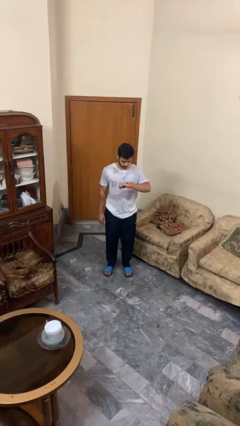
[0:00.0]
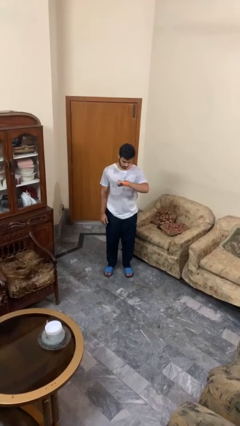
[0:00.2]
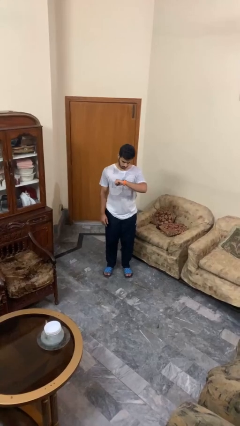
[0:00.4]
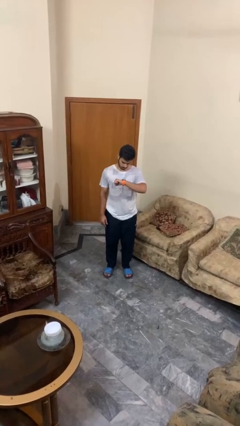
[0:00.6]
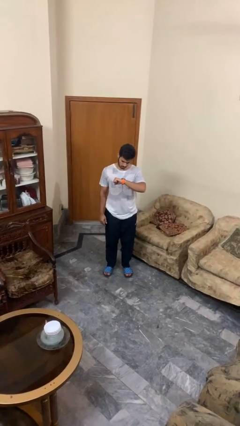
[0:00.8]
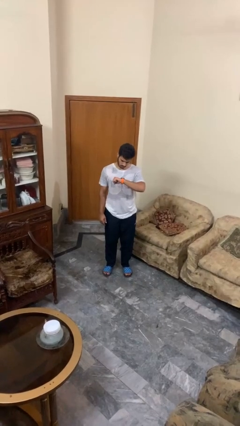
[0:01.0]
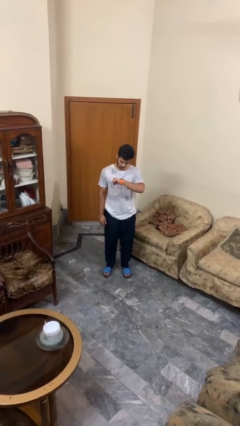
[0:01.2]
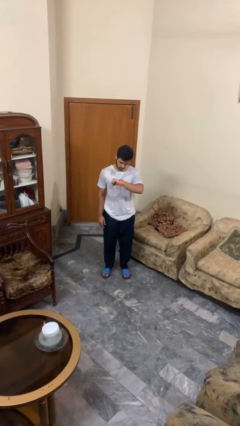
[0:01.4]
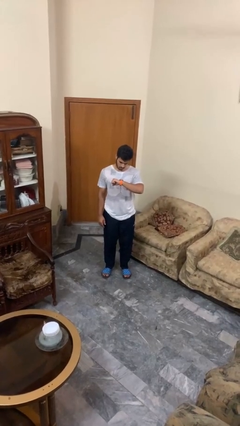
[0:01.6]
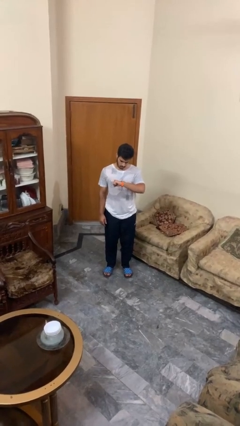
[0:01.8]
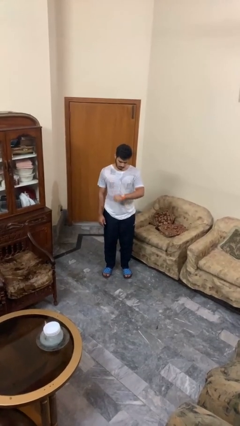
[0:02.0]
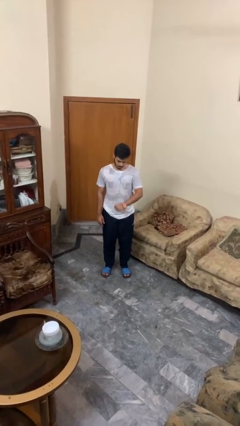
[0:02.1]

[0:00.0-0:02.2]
person looks at wristwatch

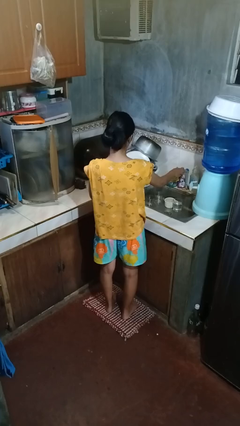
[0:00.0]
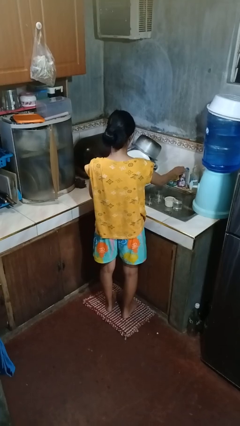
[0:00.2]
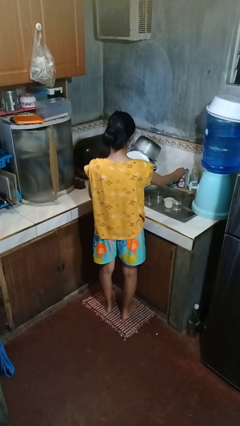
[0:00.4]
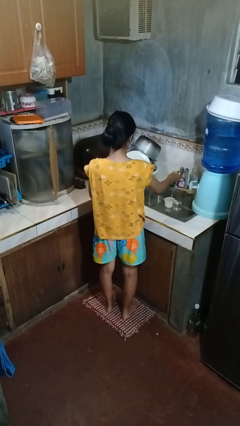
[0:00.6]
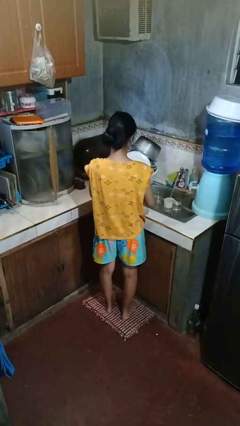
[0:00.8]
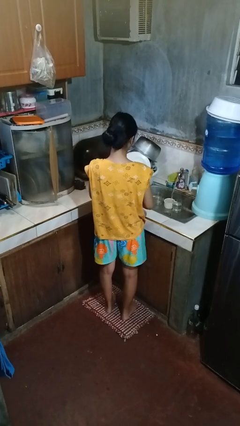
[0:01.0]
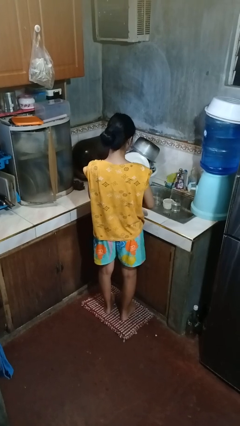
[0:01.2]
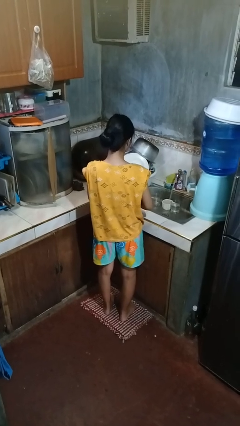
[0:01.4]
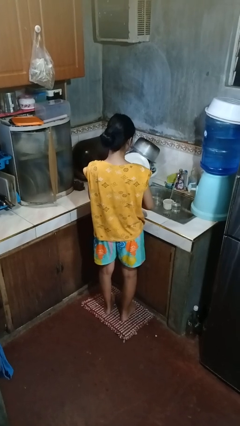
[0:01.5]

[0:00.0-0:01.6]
person turns on faucet

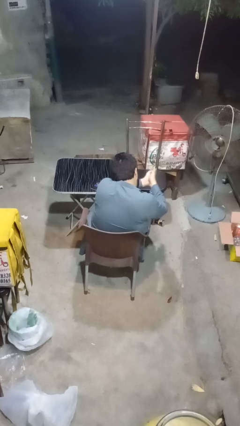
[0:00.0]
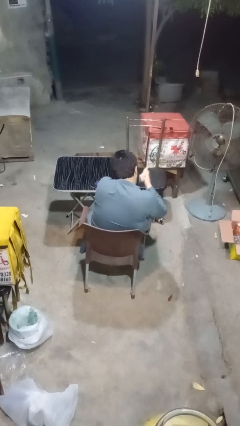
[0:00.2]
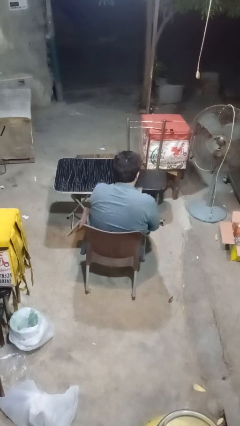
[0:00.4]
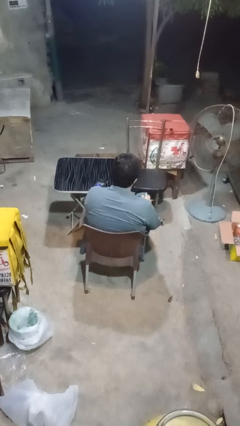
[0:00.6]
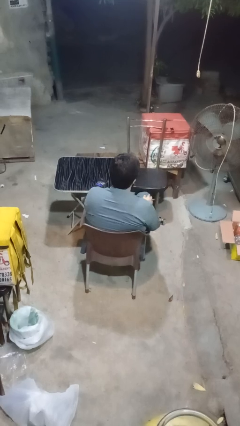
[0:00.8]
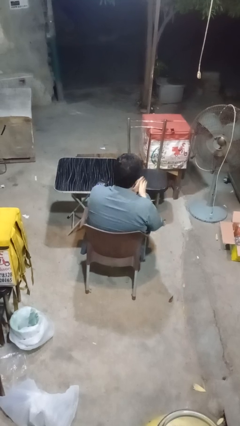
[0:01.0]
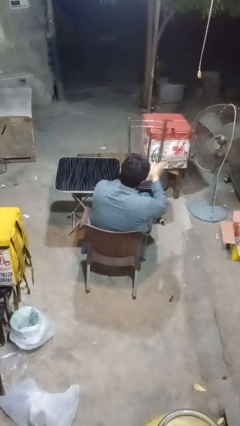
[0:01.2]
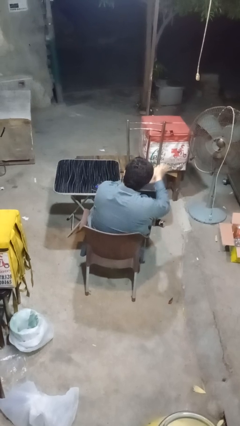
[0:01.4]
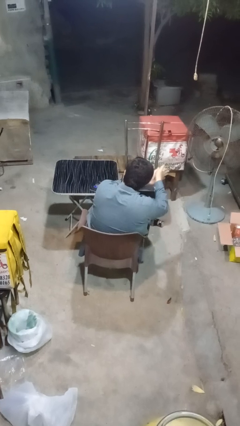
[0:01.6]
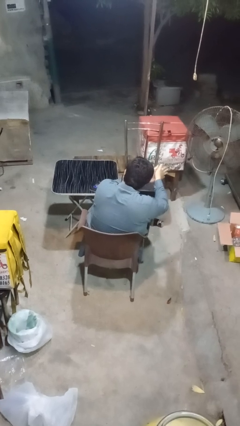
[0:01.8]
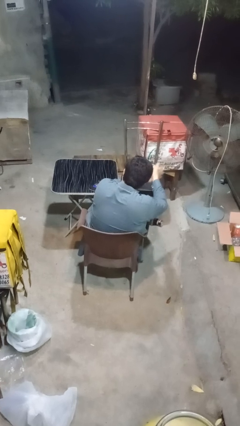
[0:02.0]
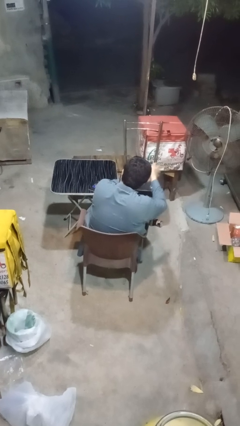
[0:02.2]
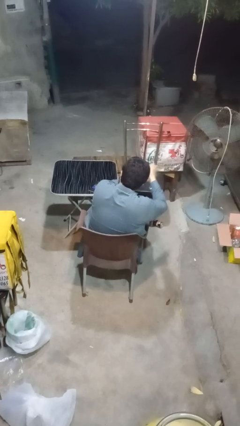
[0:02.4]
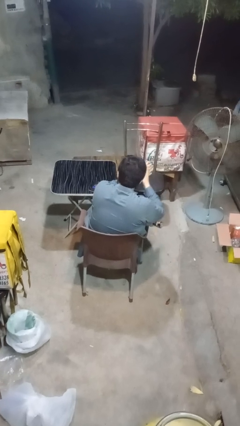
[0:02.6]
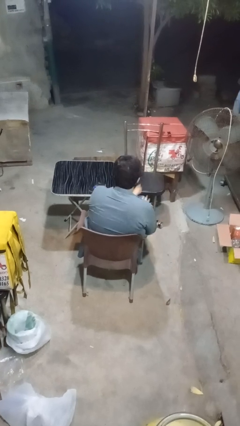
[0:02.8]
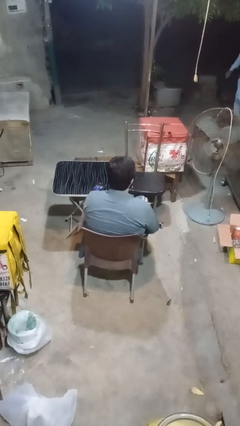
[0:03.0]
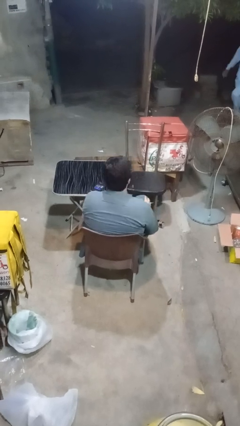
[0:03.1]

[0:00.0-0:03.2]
person blows into hands

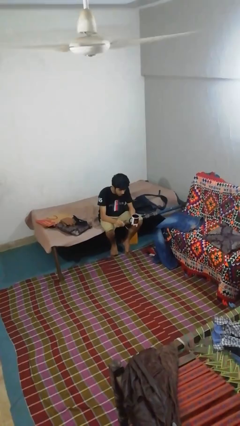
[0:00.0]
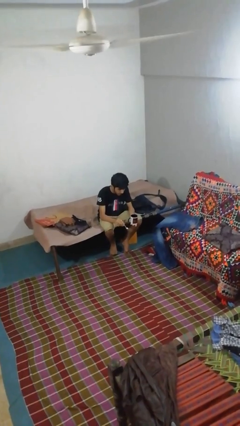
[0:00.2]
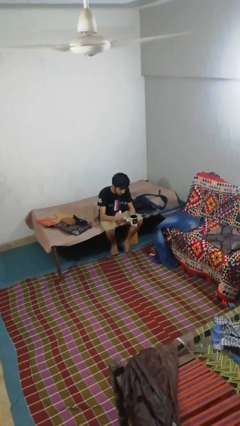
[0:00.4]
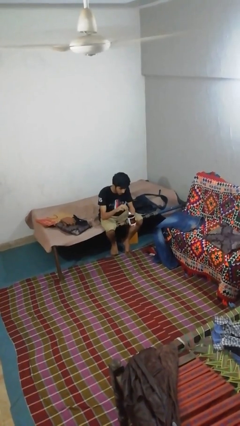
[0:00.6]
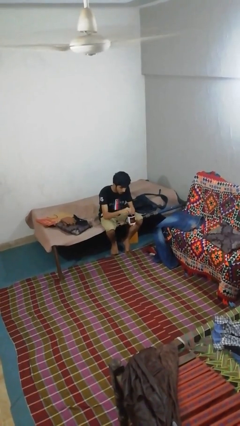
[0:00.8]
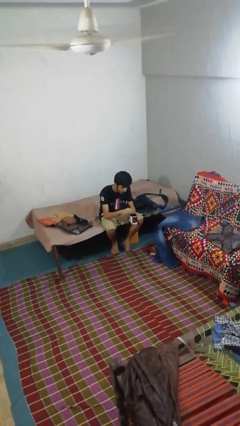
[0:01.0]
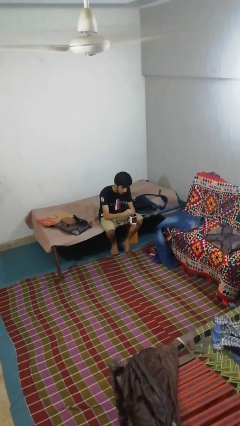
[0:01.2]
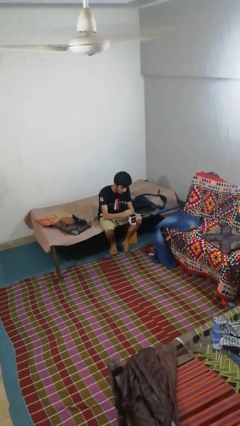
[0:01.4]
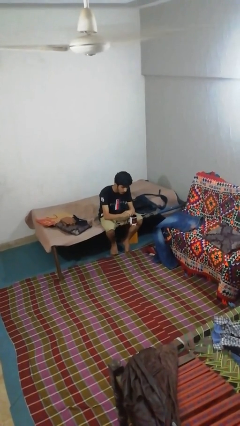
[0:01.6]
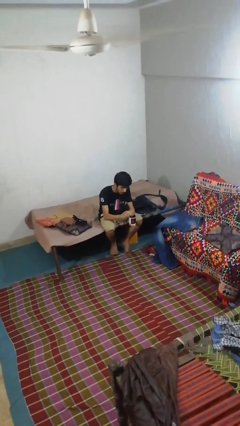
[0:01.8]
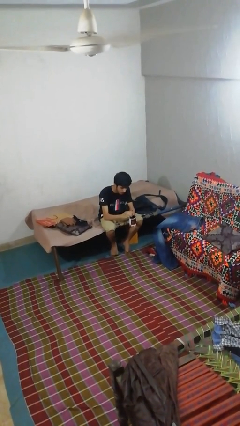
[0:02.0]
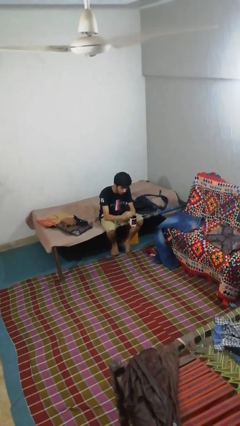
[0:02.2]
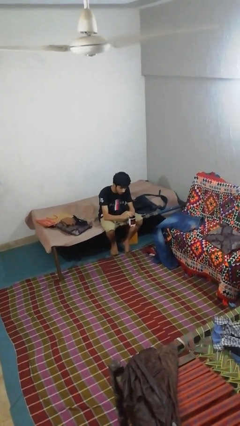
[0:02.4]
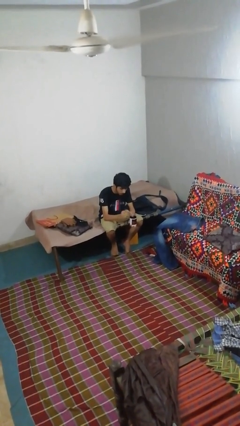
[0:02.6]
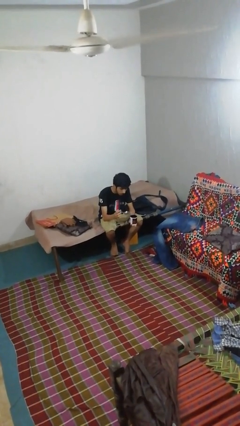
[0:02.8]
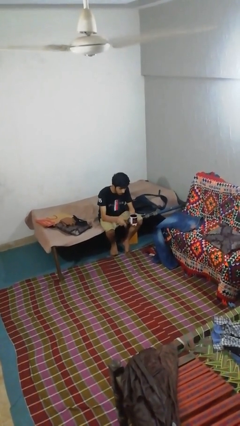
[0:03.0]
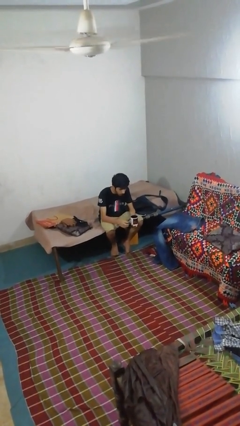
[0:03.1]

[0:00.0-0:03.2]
person stirs mug

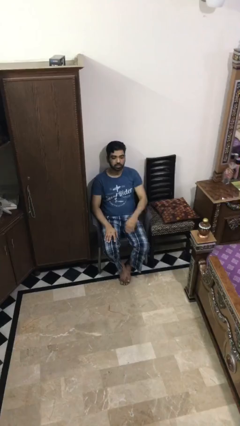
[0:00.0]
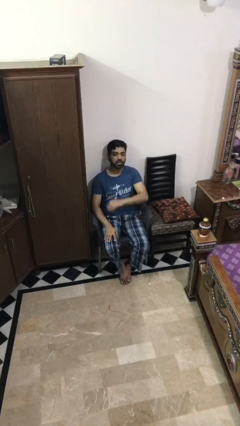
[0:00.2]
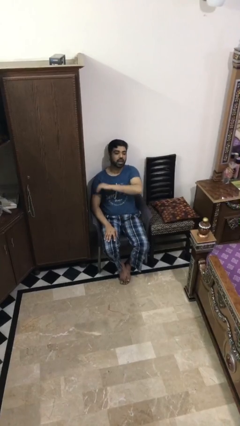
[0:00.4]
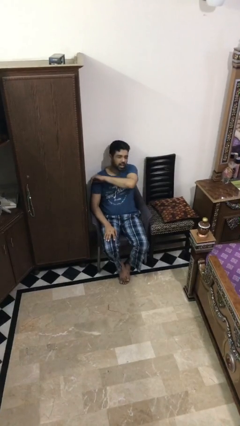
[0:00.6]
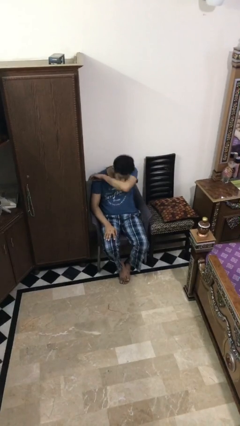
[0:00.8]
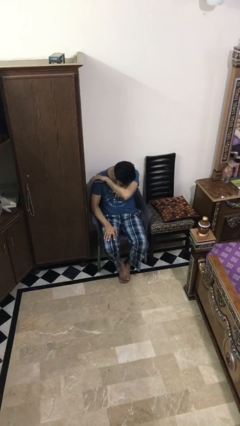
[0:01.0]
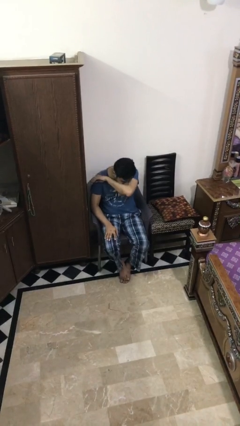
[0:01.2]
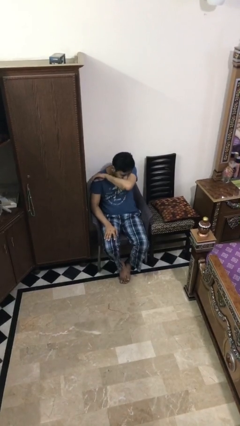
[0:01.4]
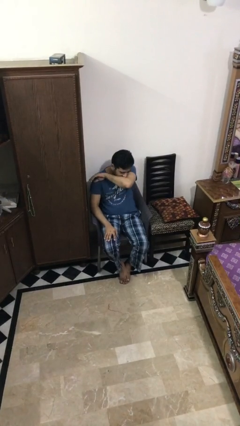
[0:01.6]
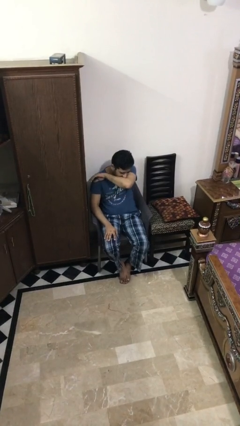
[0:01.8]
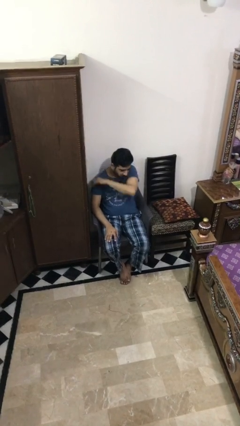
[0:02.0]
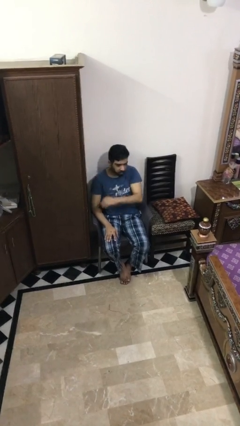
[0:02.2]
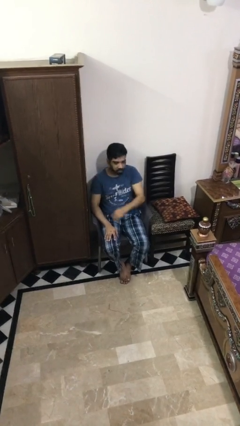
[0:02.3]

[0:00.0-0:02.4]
person sneezes into arm

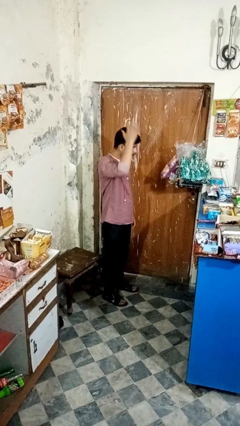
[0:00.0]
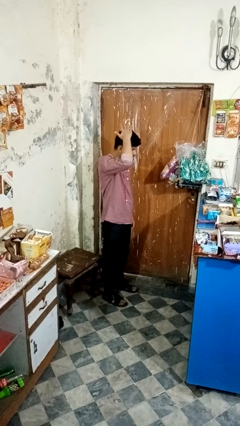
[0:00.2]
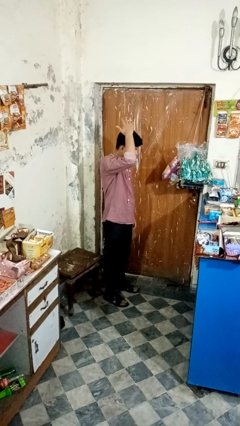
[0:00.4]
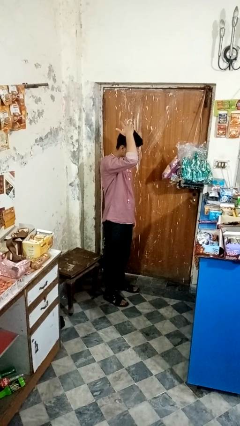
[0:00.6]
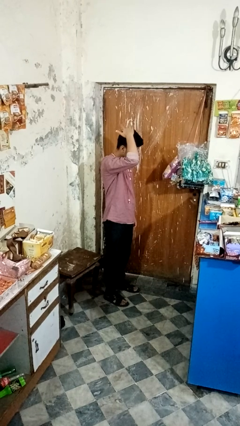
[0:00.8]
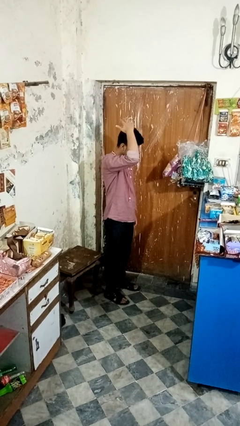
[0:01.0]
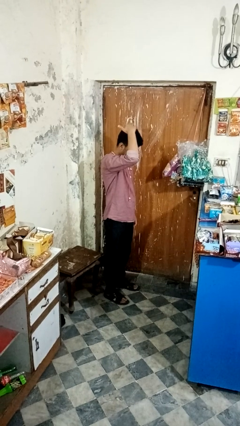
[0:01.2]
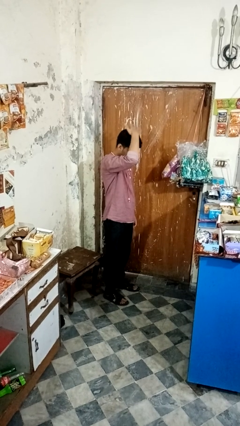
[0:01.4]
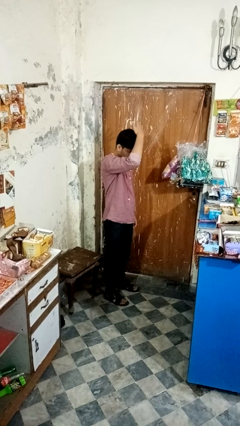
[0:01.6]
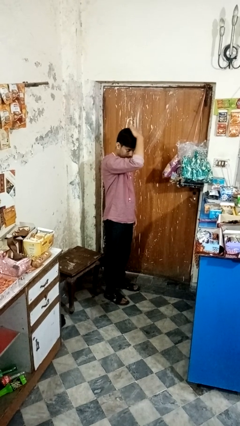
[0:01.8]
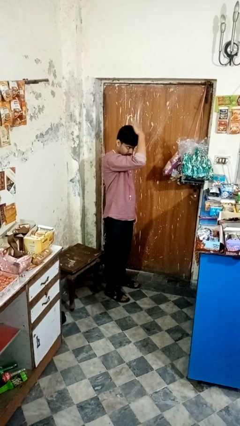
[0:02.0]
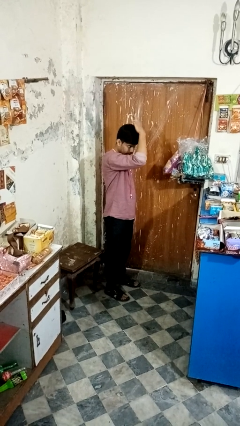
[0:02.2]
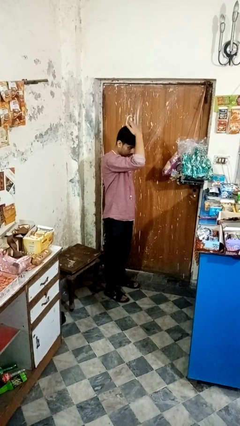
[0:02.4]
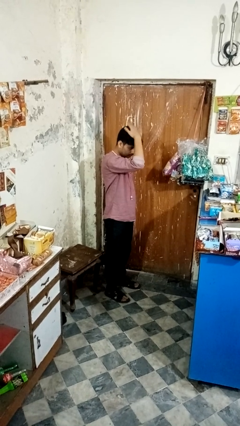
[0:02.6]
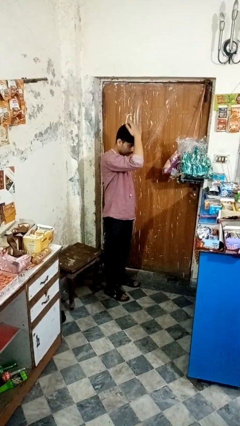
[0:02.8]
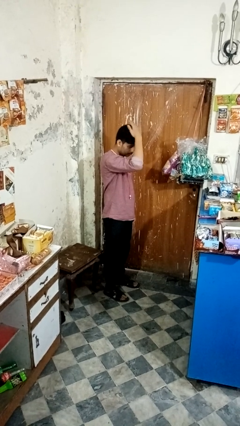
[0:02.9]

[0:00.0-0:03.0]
person pats head

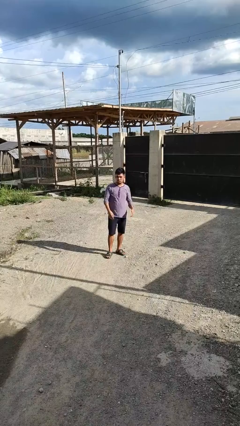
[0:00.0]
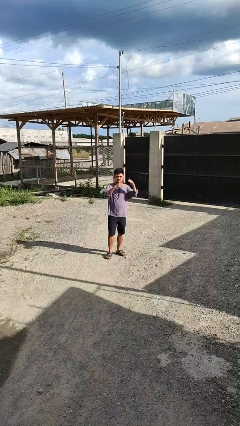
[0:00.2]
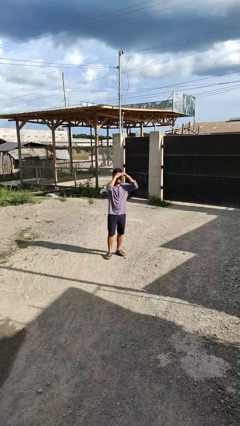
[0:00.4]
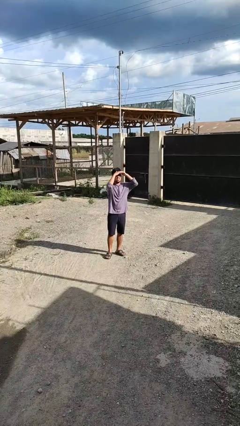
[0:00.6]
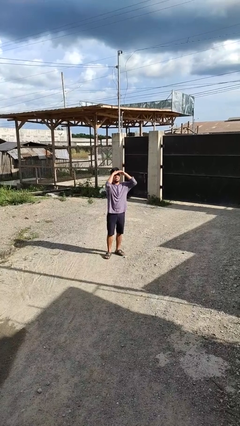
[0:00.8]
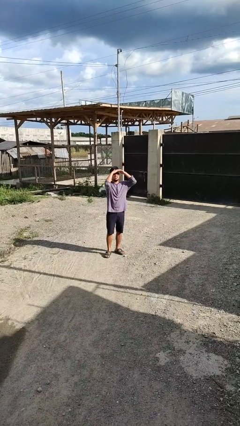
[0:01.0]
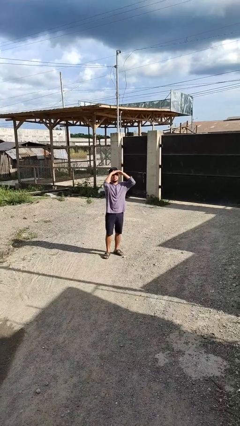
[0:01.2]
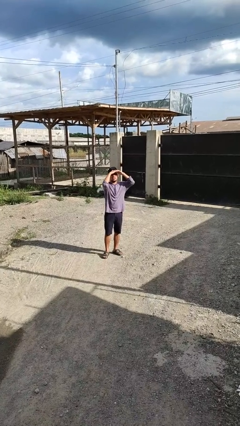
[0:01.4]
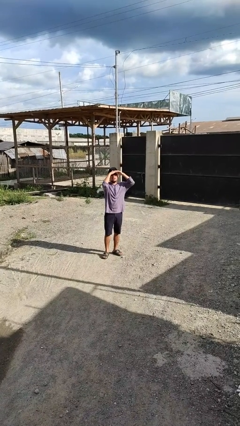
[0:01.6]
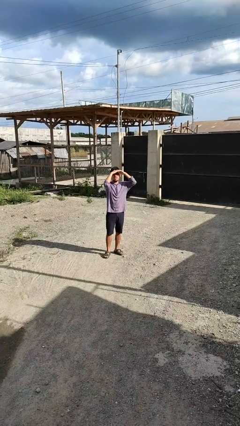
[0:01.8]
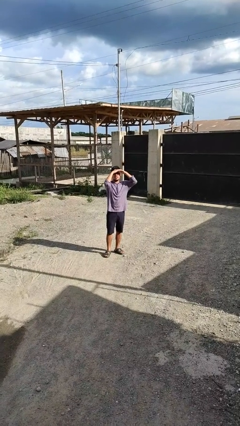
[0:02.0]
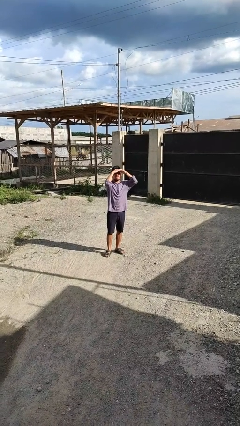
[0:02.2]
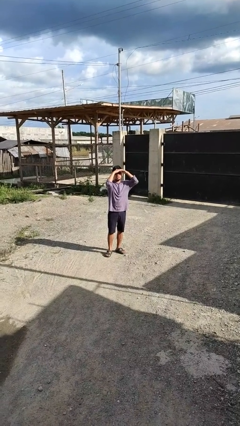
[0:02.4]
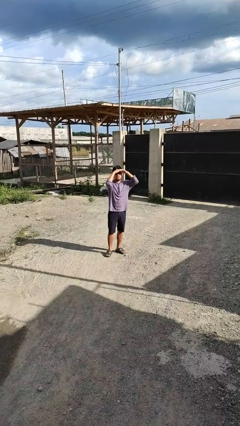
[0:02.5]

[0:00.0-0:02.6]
person shades eyes
